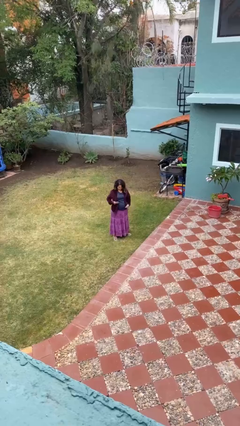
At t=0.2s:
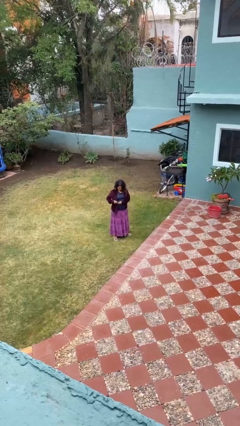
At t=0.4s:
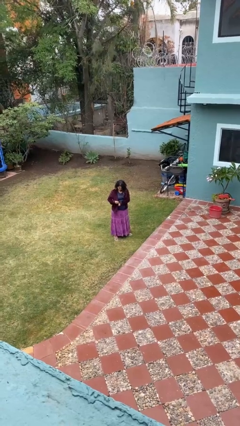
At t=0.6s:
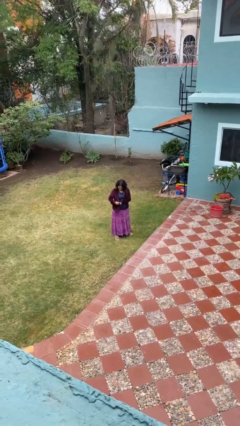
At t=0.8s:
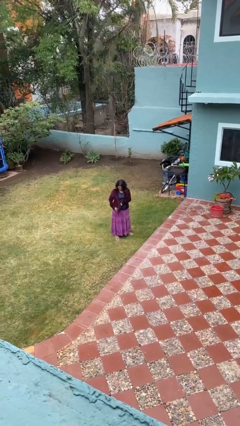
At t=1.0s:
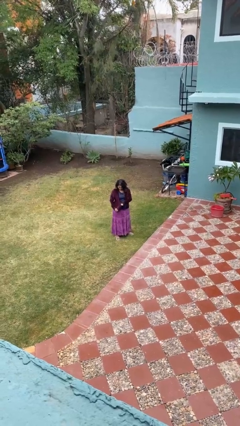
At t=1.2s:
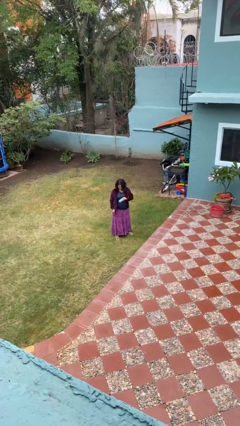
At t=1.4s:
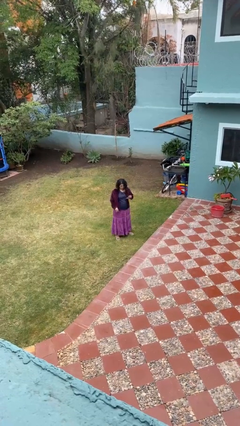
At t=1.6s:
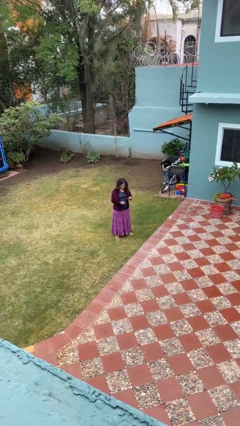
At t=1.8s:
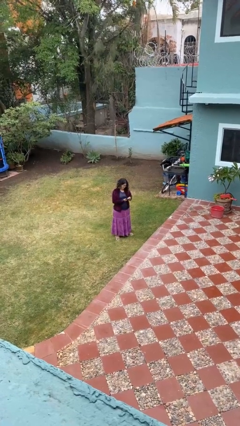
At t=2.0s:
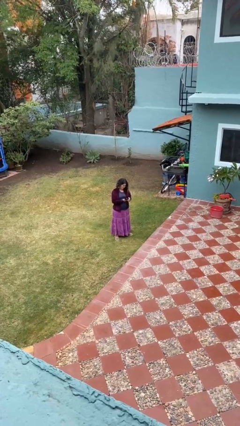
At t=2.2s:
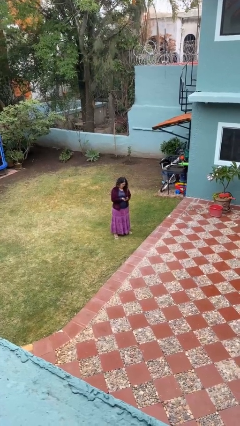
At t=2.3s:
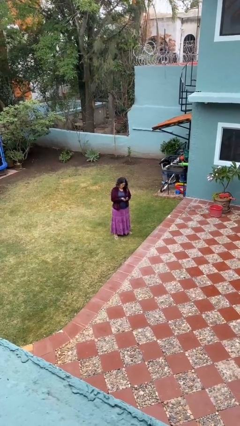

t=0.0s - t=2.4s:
person takes phone from pocket

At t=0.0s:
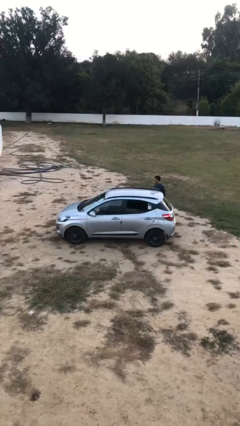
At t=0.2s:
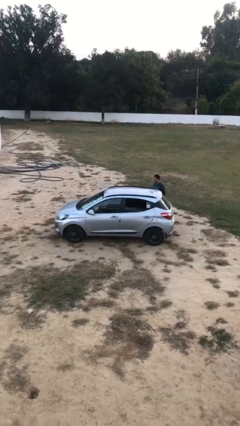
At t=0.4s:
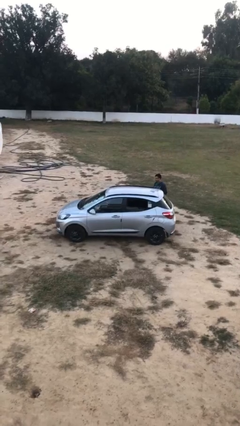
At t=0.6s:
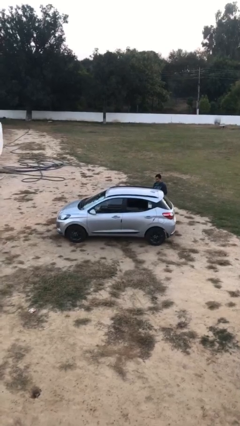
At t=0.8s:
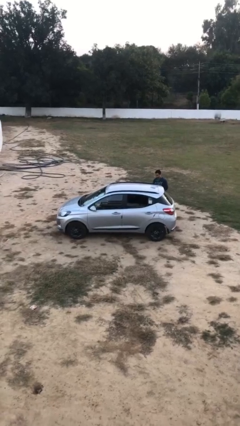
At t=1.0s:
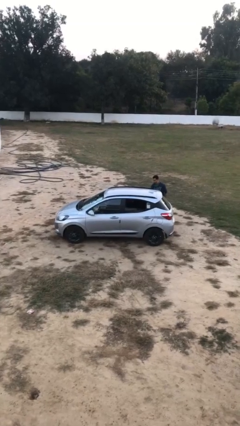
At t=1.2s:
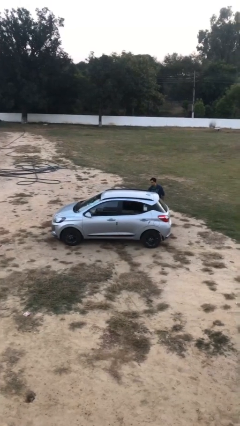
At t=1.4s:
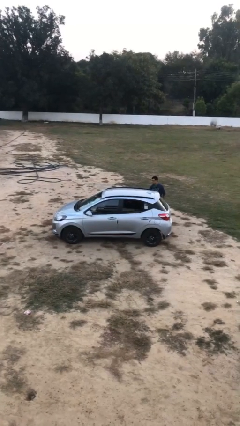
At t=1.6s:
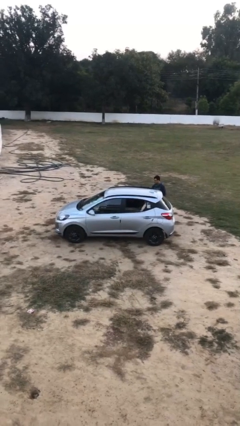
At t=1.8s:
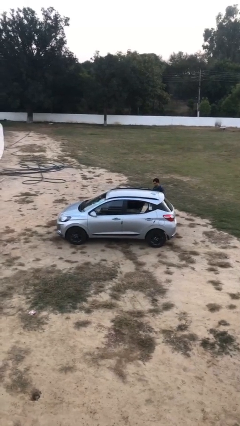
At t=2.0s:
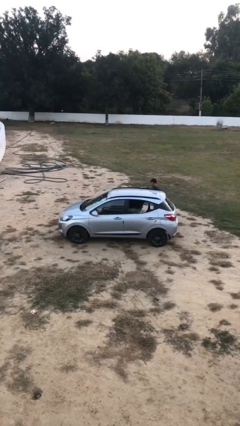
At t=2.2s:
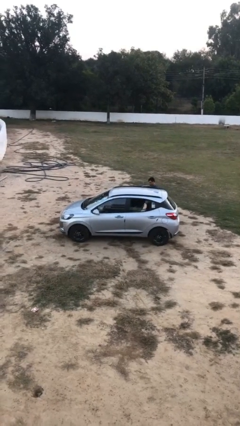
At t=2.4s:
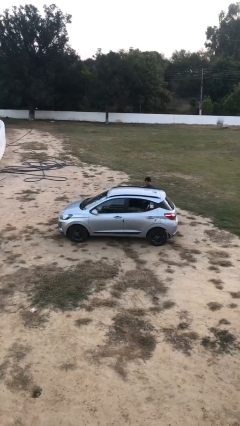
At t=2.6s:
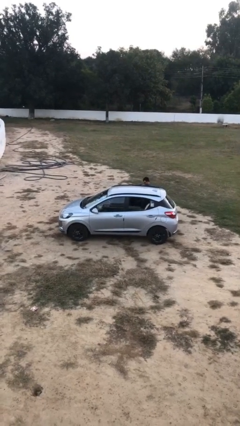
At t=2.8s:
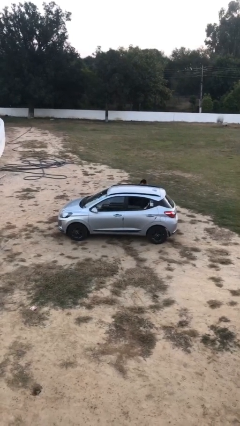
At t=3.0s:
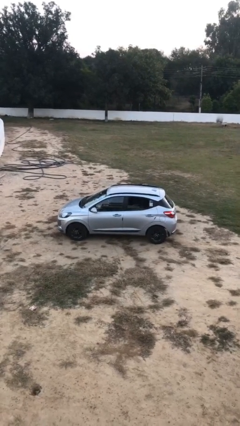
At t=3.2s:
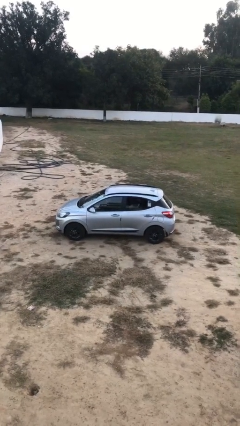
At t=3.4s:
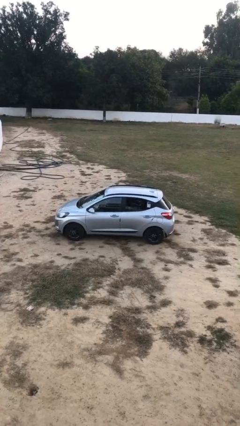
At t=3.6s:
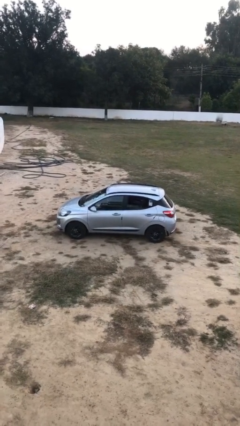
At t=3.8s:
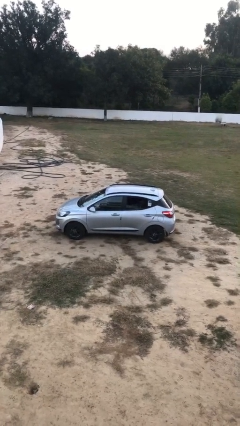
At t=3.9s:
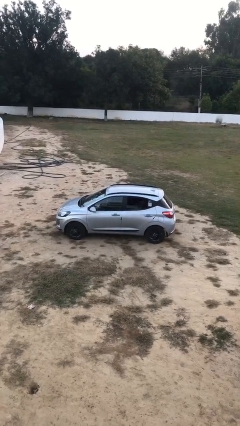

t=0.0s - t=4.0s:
car picks up person

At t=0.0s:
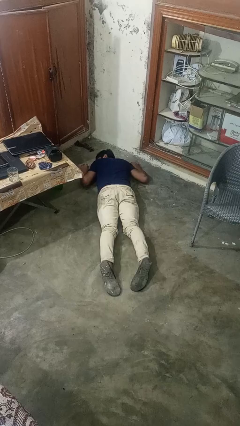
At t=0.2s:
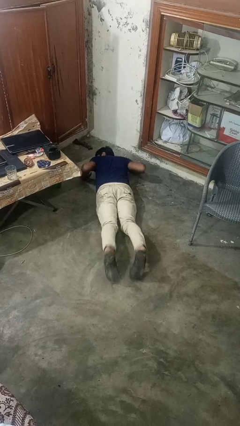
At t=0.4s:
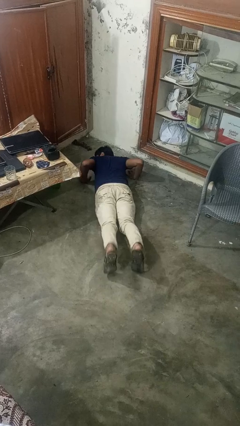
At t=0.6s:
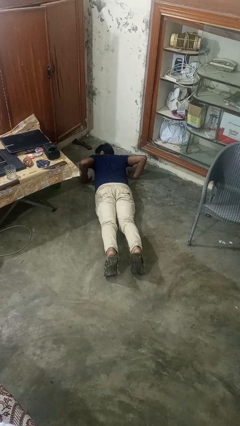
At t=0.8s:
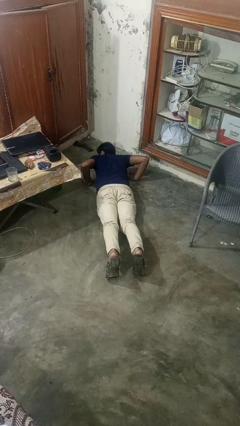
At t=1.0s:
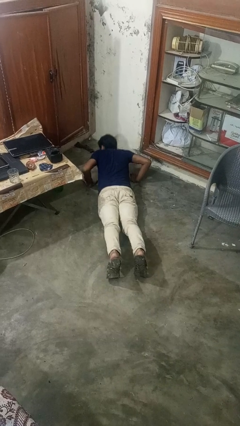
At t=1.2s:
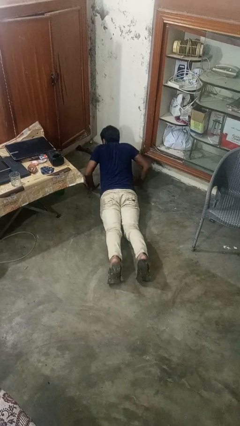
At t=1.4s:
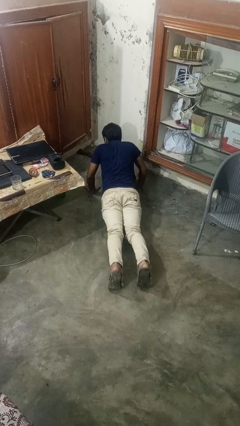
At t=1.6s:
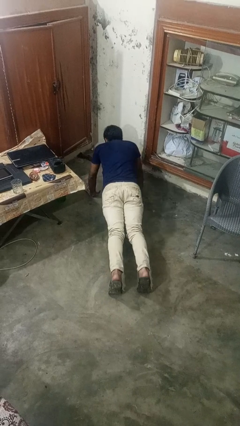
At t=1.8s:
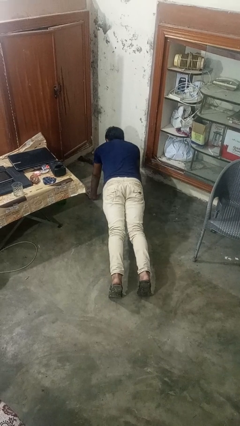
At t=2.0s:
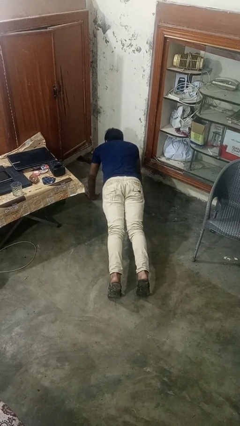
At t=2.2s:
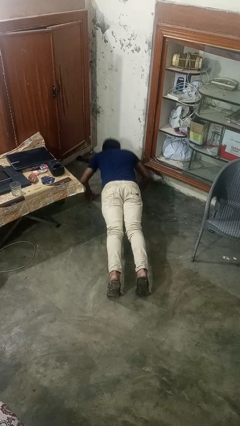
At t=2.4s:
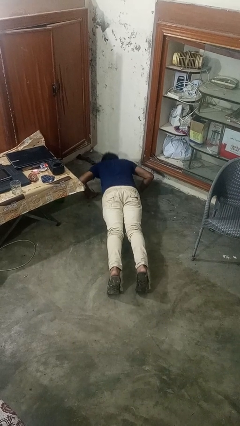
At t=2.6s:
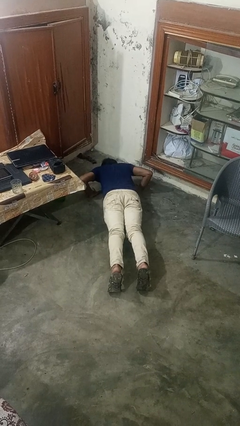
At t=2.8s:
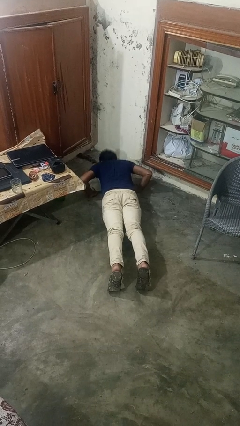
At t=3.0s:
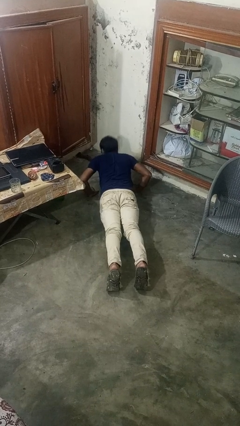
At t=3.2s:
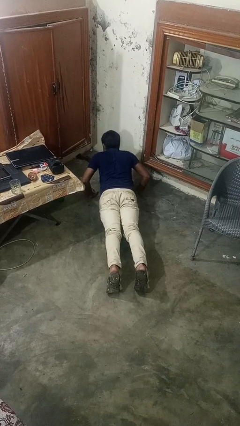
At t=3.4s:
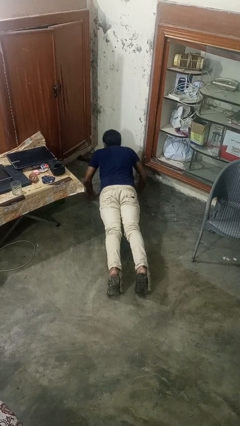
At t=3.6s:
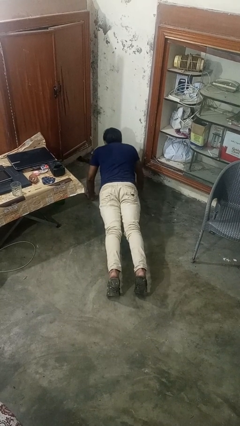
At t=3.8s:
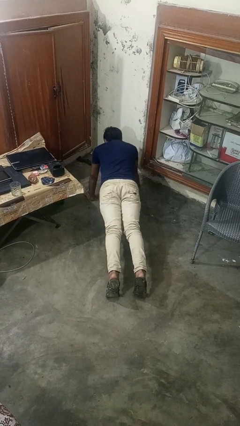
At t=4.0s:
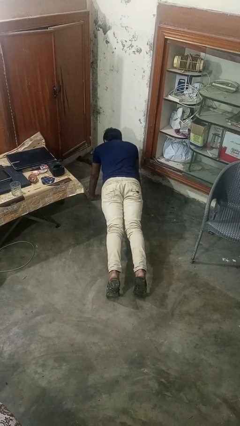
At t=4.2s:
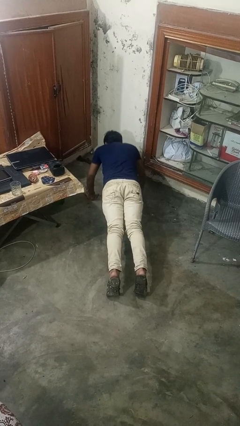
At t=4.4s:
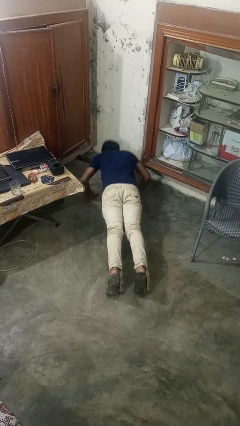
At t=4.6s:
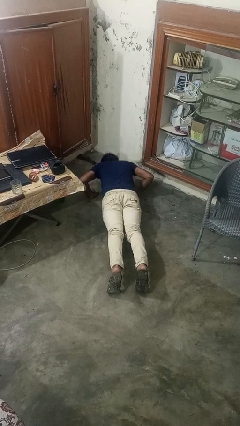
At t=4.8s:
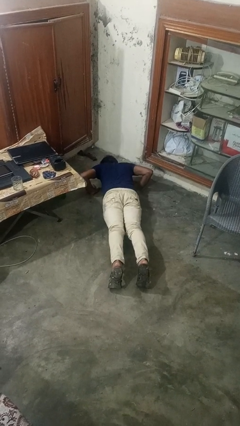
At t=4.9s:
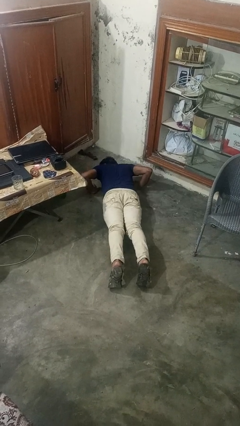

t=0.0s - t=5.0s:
person exercises with pushup

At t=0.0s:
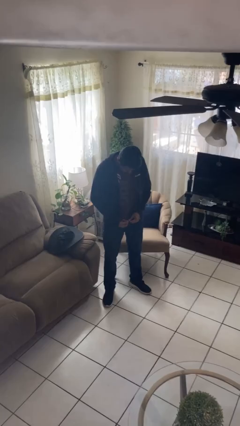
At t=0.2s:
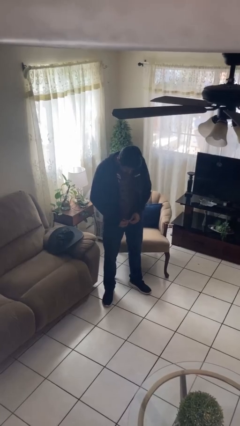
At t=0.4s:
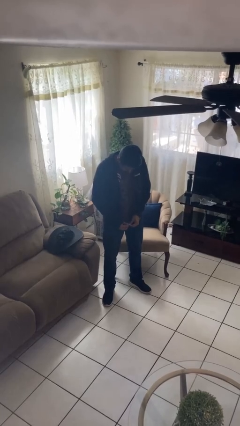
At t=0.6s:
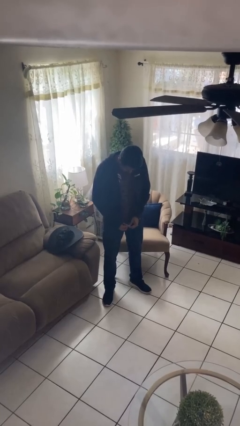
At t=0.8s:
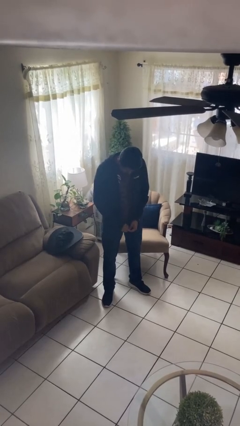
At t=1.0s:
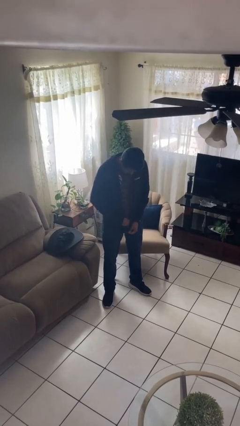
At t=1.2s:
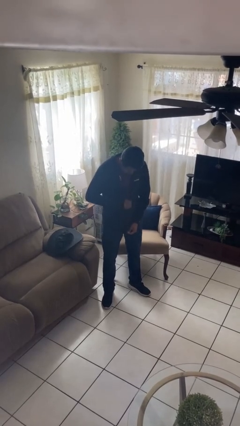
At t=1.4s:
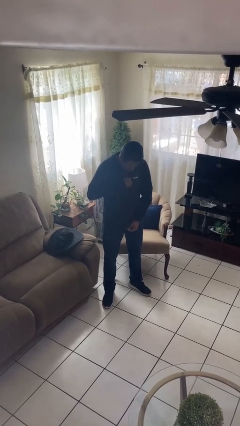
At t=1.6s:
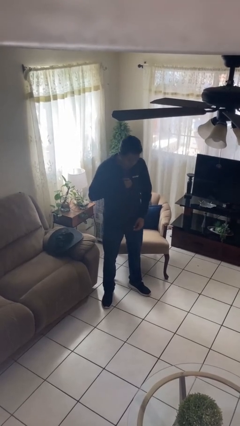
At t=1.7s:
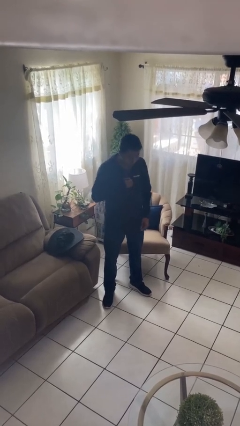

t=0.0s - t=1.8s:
person zips up jacket

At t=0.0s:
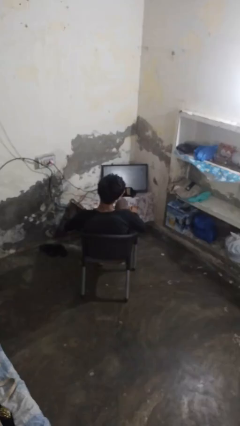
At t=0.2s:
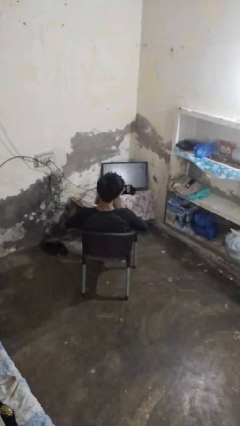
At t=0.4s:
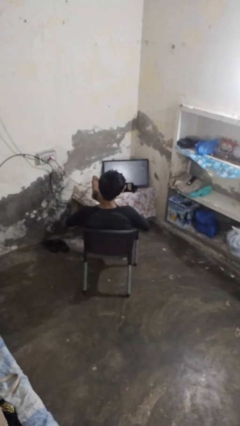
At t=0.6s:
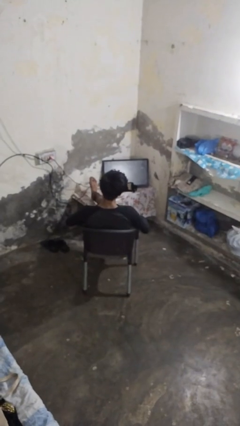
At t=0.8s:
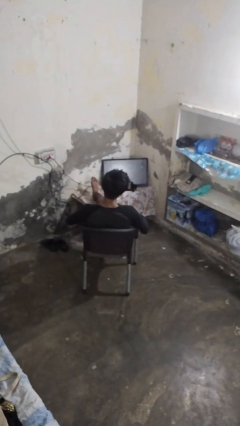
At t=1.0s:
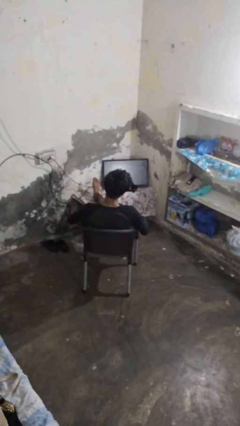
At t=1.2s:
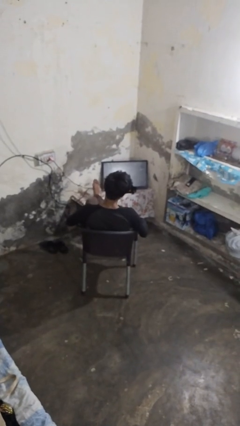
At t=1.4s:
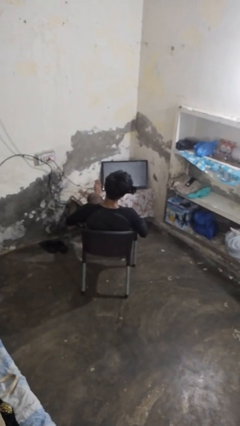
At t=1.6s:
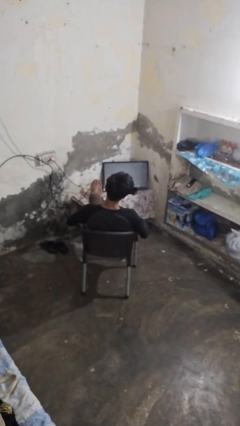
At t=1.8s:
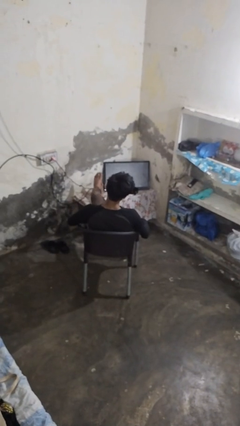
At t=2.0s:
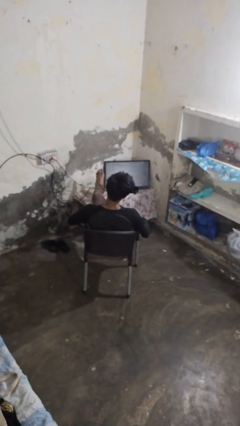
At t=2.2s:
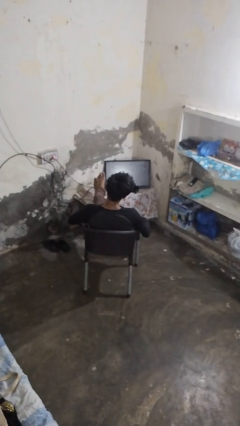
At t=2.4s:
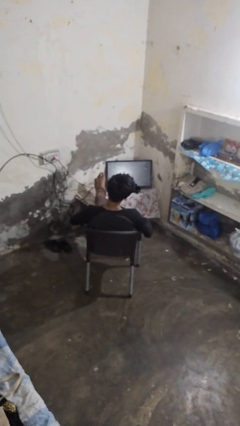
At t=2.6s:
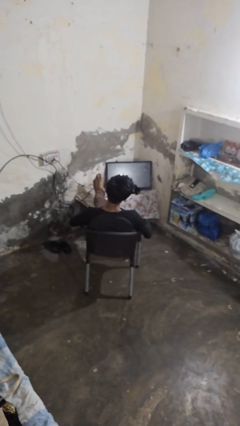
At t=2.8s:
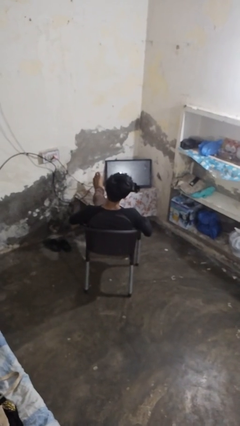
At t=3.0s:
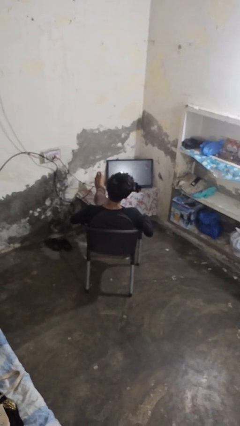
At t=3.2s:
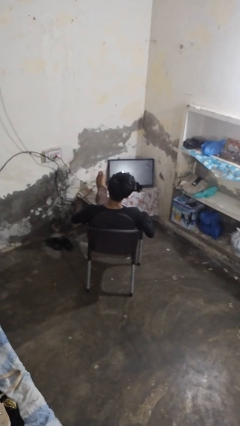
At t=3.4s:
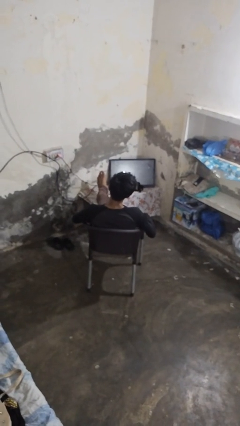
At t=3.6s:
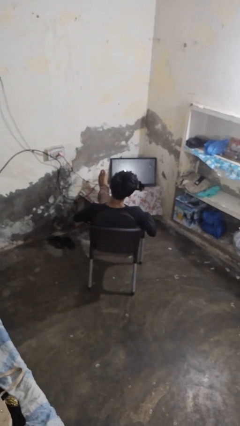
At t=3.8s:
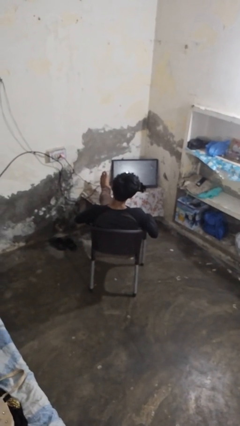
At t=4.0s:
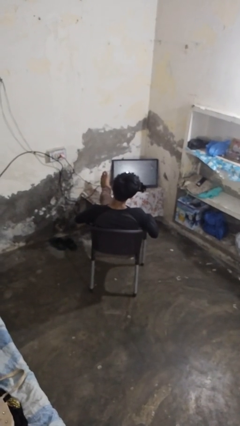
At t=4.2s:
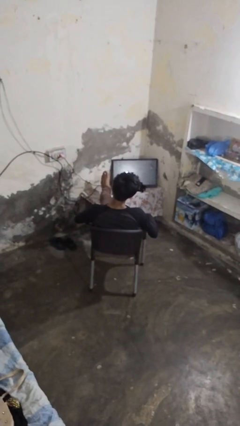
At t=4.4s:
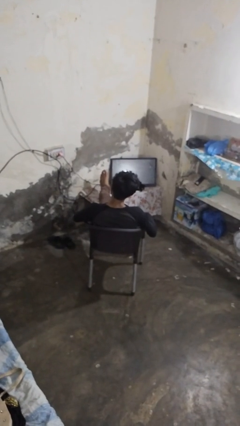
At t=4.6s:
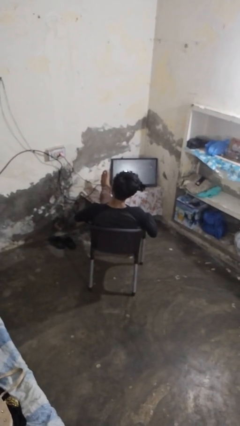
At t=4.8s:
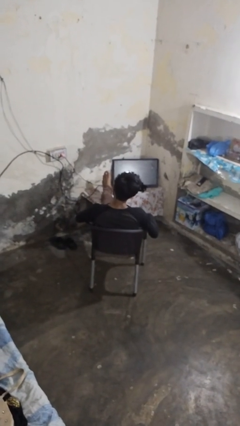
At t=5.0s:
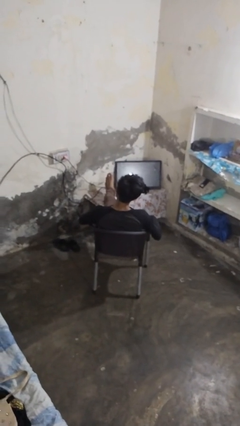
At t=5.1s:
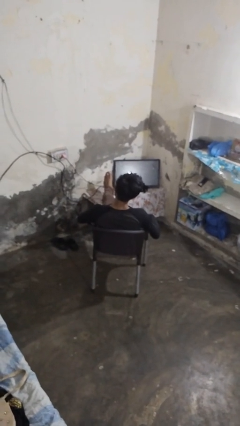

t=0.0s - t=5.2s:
person puts feet up
